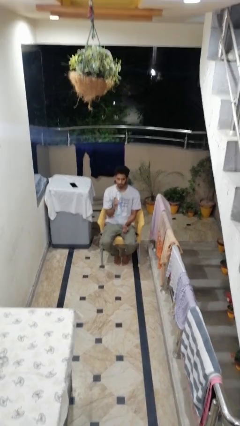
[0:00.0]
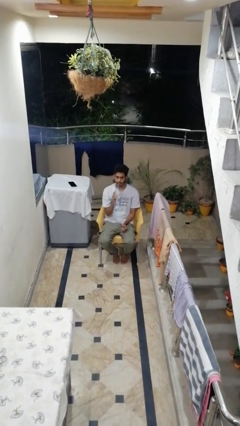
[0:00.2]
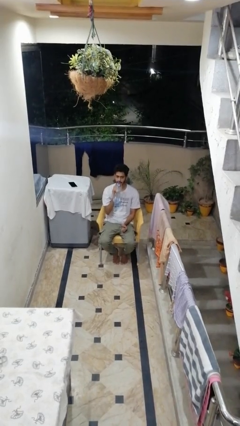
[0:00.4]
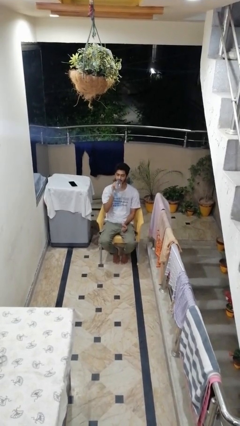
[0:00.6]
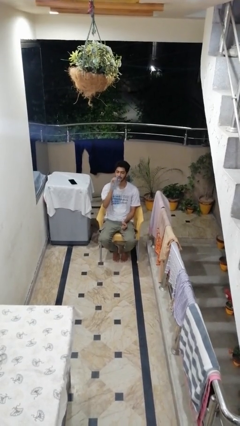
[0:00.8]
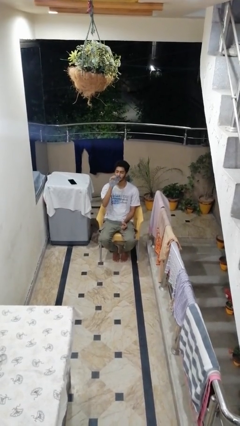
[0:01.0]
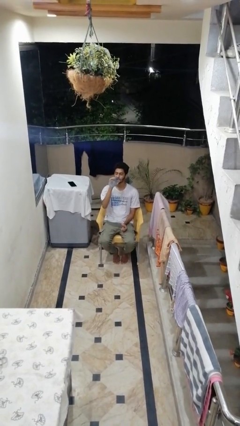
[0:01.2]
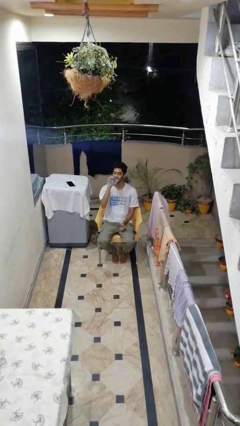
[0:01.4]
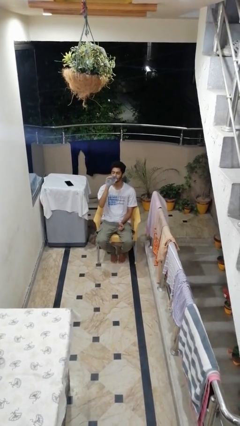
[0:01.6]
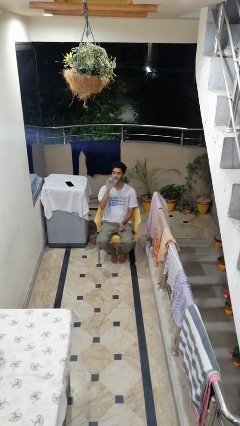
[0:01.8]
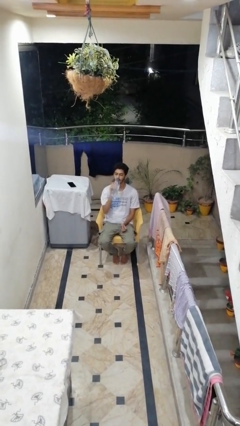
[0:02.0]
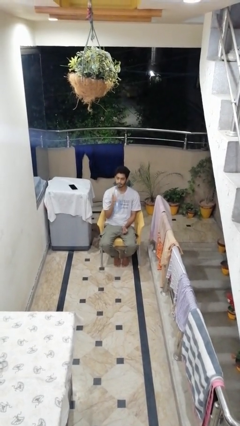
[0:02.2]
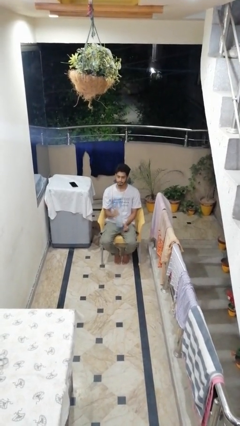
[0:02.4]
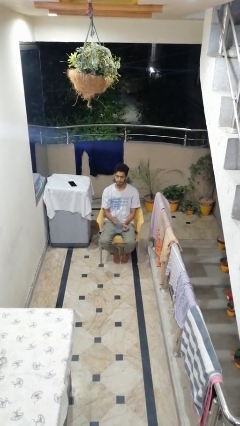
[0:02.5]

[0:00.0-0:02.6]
person drinks from bottle

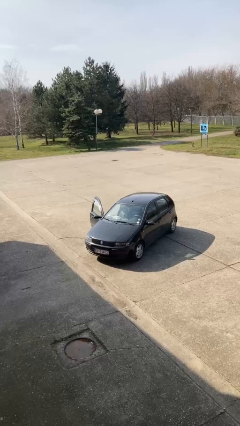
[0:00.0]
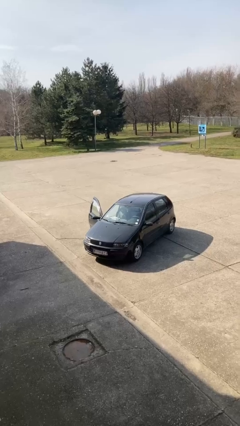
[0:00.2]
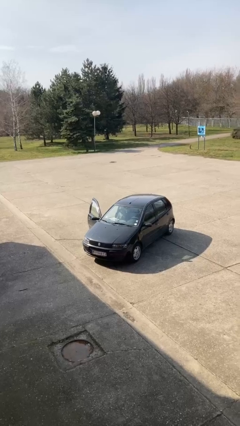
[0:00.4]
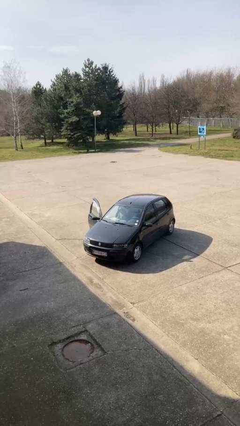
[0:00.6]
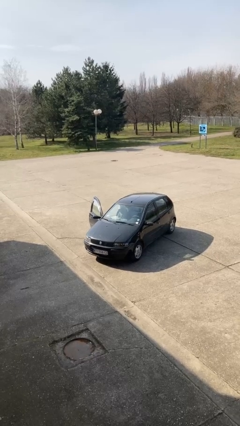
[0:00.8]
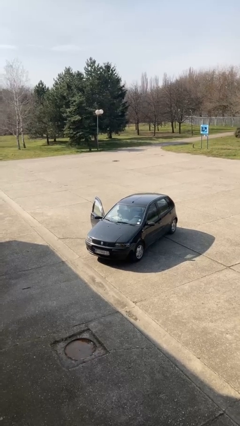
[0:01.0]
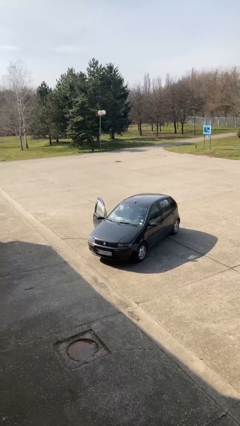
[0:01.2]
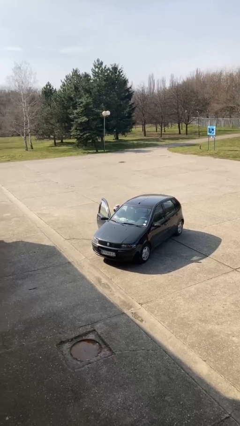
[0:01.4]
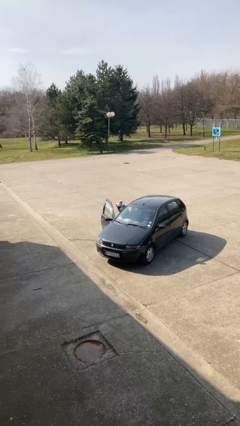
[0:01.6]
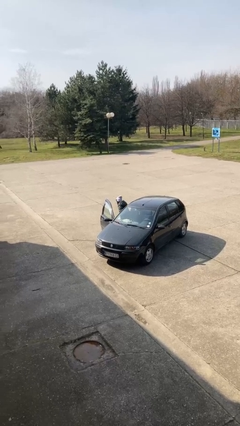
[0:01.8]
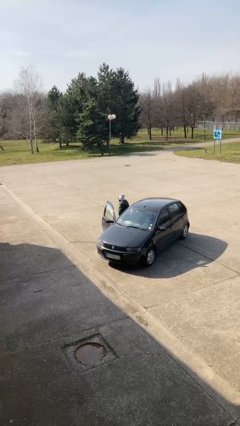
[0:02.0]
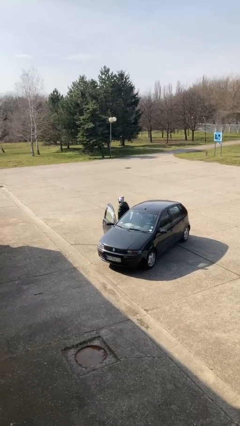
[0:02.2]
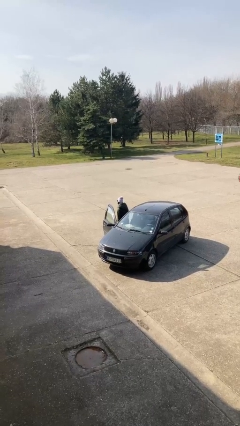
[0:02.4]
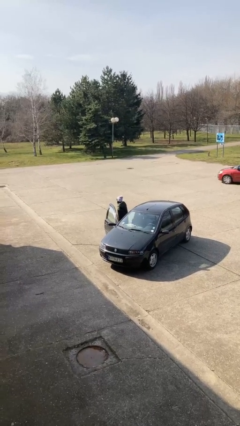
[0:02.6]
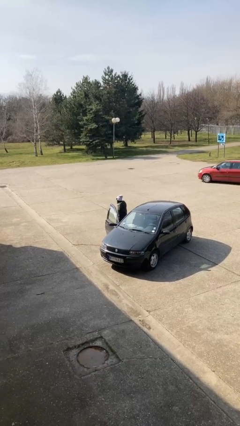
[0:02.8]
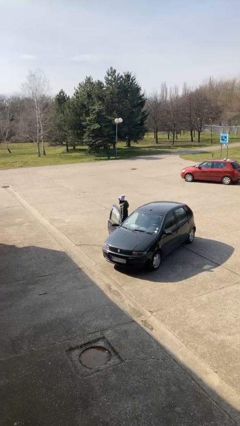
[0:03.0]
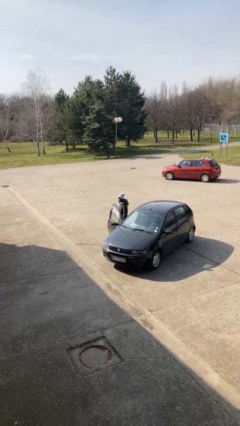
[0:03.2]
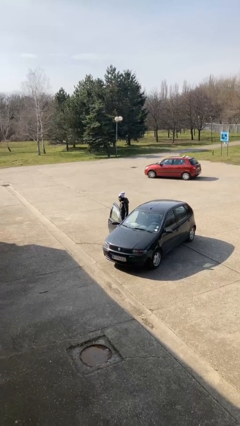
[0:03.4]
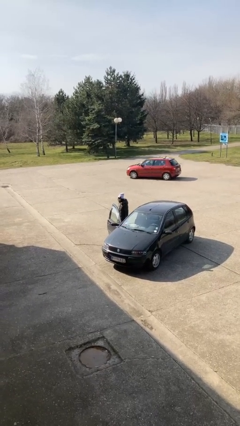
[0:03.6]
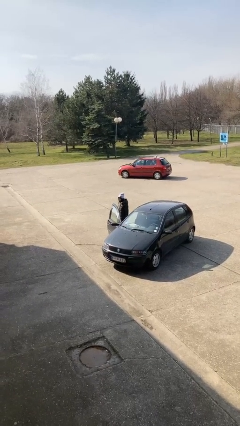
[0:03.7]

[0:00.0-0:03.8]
person exits car

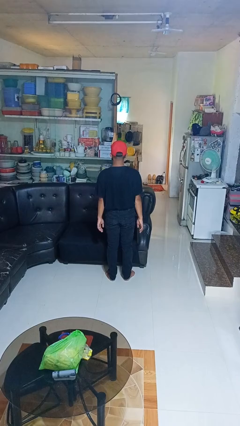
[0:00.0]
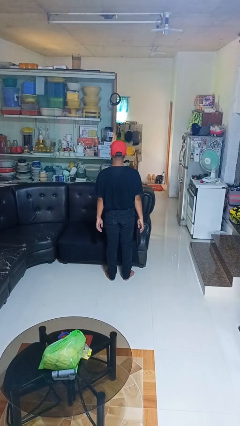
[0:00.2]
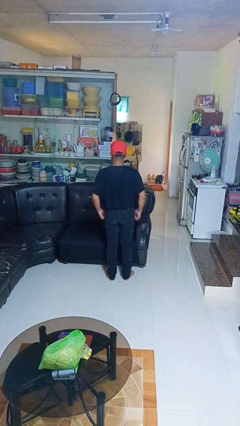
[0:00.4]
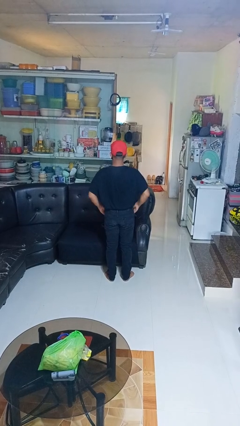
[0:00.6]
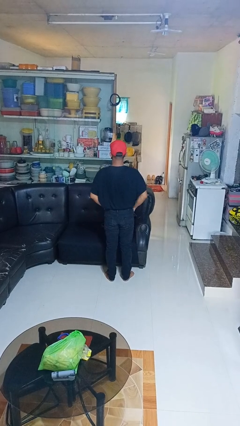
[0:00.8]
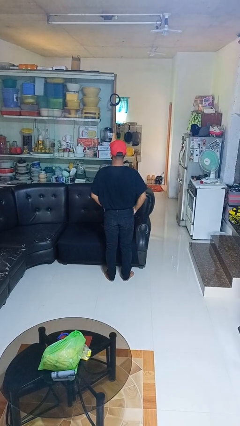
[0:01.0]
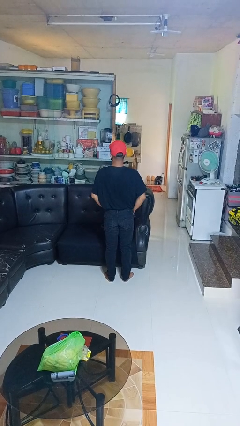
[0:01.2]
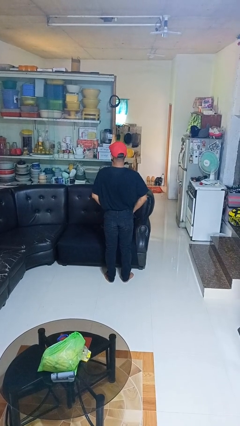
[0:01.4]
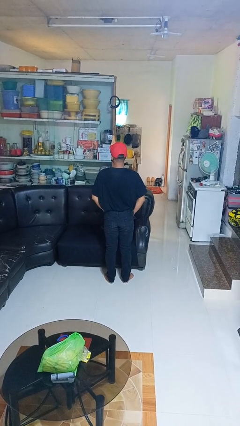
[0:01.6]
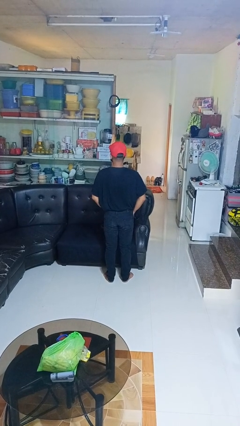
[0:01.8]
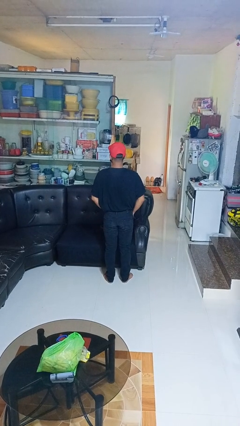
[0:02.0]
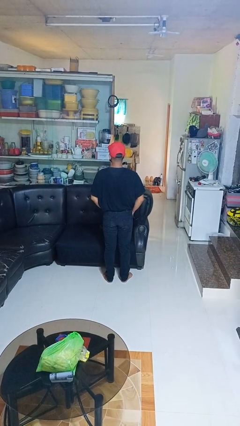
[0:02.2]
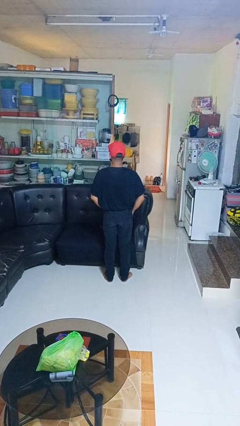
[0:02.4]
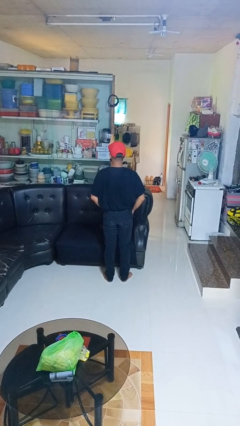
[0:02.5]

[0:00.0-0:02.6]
person puts hands in back pockets

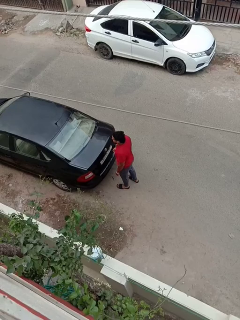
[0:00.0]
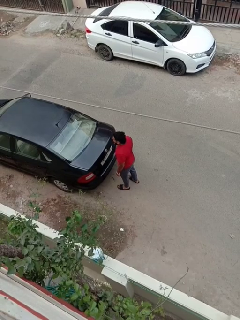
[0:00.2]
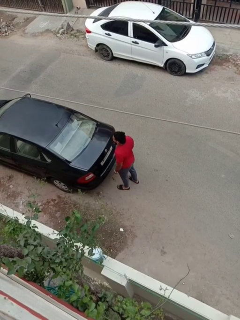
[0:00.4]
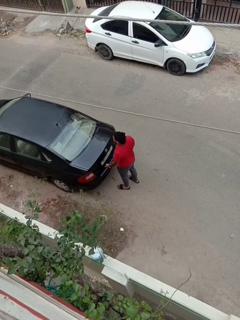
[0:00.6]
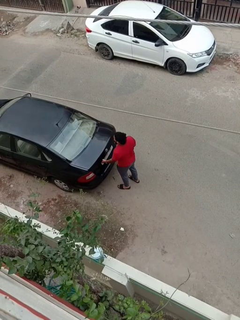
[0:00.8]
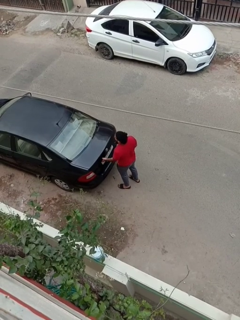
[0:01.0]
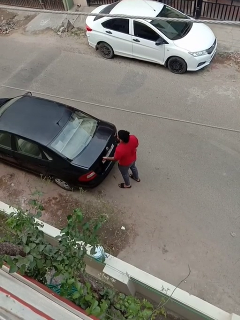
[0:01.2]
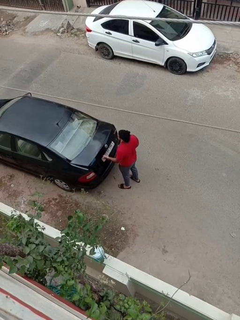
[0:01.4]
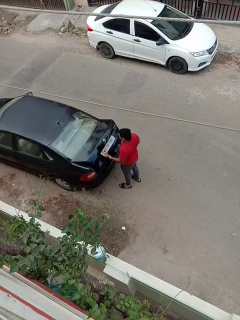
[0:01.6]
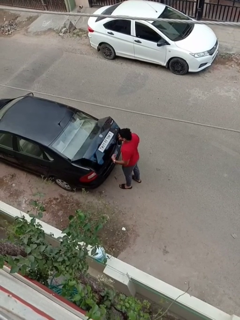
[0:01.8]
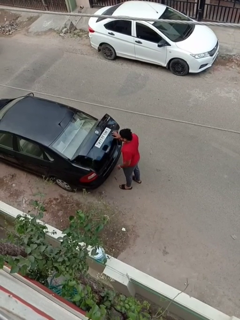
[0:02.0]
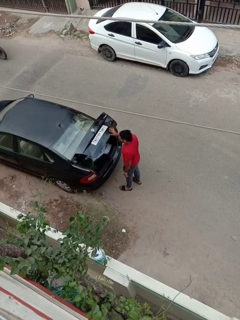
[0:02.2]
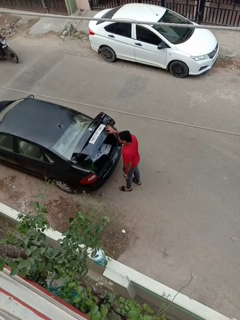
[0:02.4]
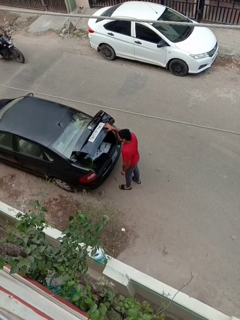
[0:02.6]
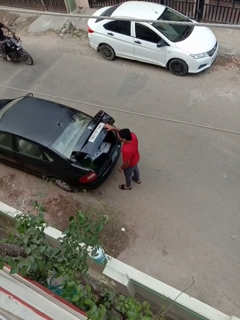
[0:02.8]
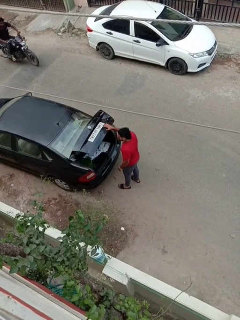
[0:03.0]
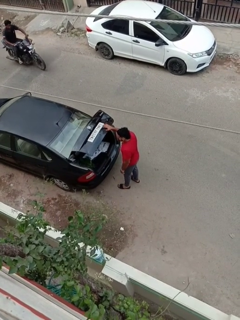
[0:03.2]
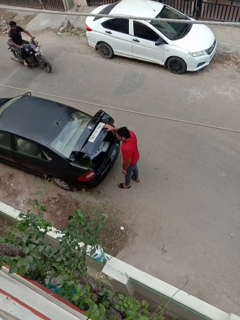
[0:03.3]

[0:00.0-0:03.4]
person opens car trunk

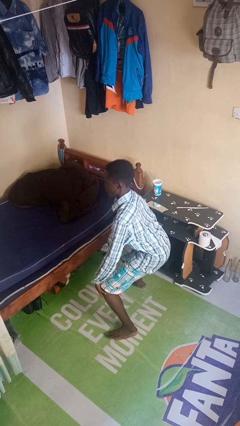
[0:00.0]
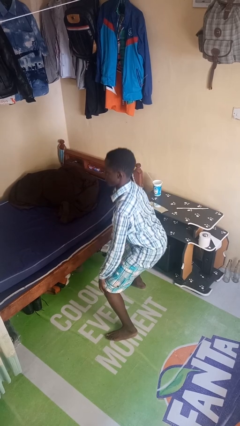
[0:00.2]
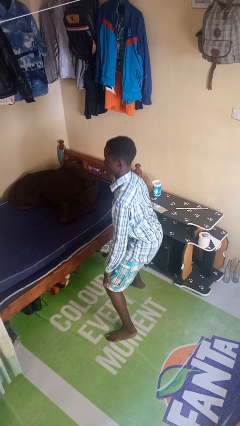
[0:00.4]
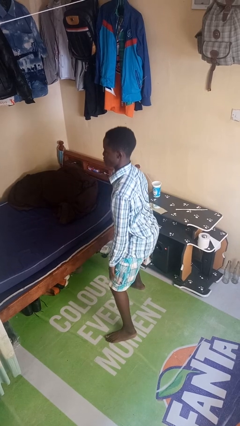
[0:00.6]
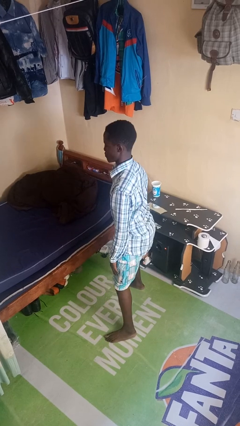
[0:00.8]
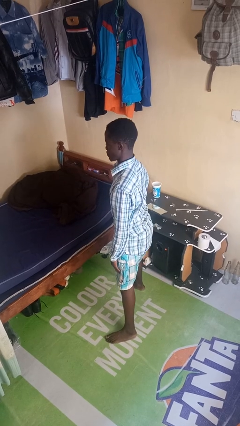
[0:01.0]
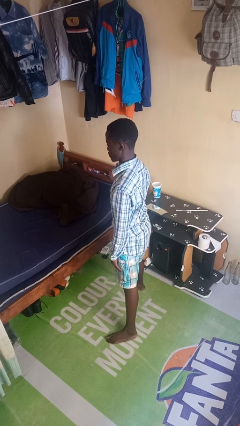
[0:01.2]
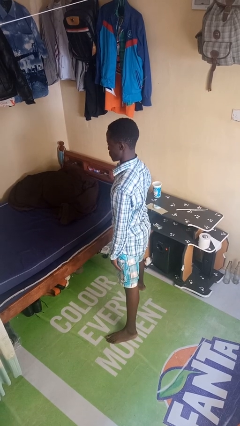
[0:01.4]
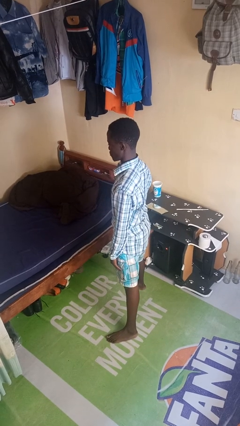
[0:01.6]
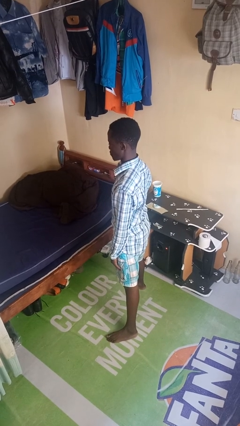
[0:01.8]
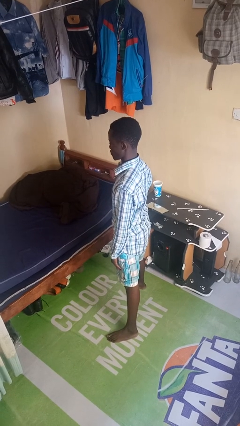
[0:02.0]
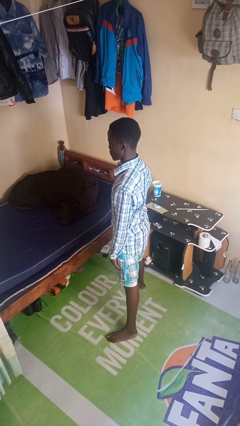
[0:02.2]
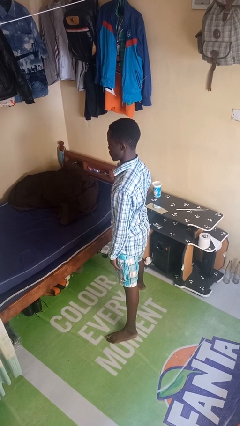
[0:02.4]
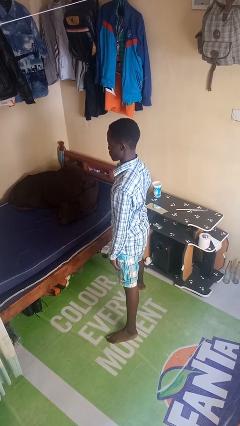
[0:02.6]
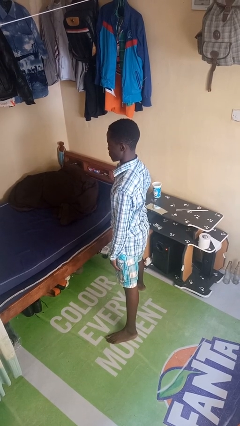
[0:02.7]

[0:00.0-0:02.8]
person stands up

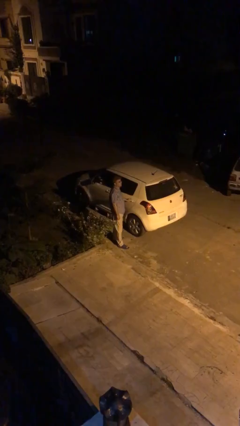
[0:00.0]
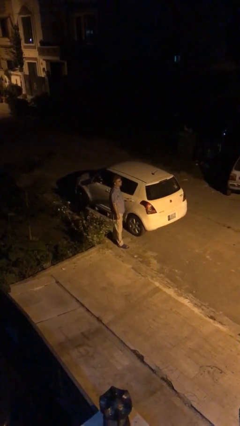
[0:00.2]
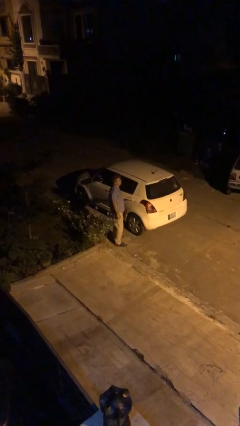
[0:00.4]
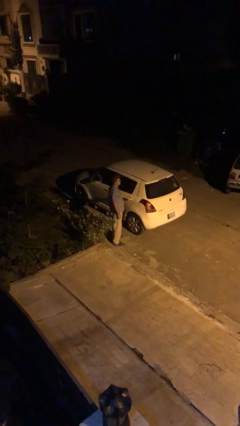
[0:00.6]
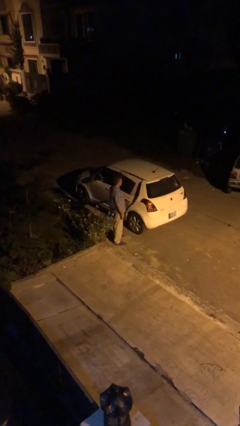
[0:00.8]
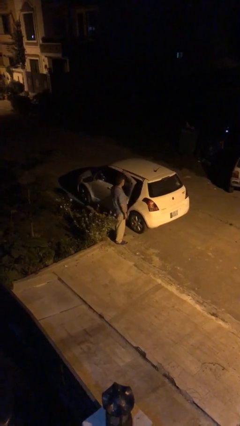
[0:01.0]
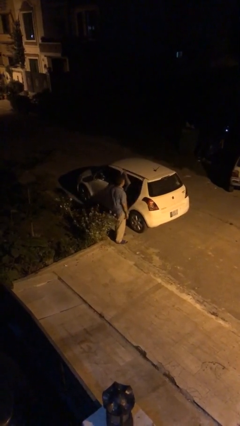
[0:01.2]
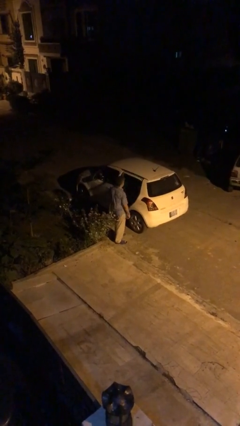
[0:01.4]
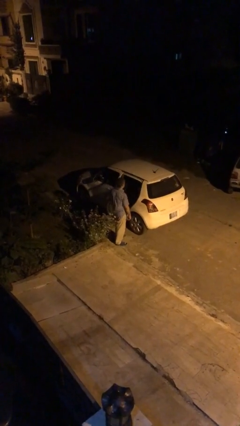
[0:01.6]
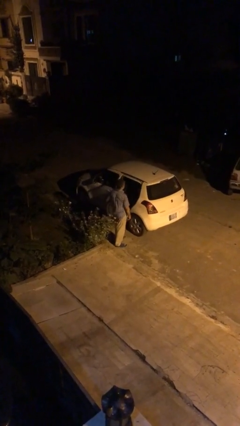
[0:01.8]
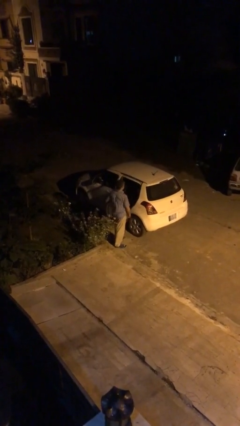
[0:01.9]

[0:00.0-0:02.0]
person opens car door

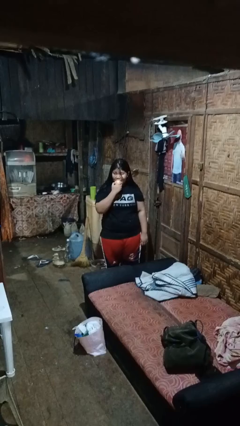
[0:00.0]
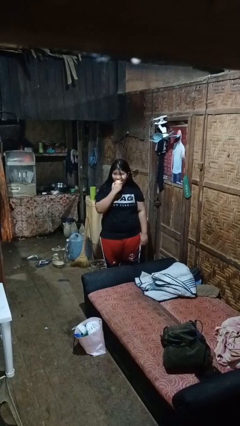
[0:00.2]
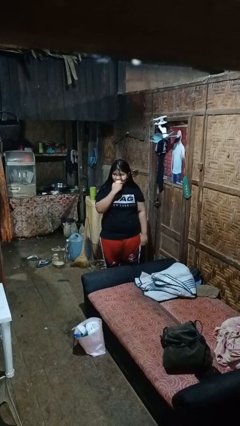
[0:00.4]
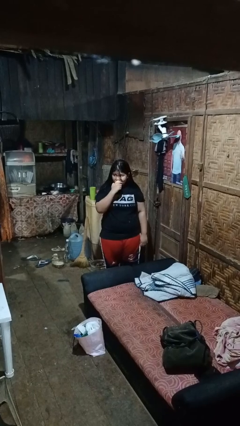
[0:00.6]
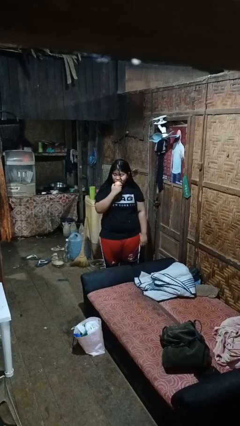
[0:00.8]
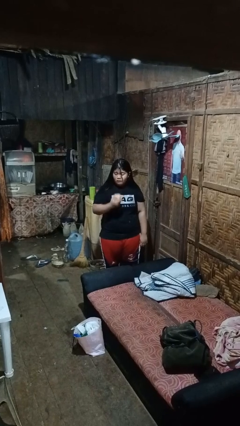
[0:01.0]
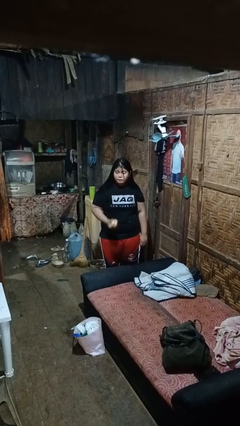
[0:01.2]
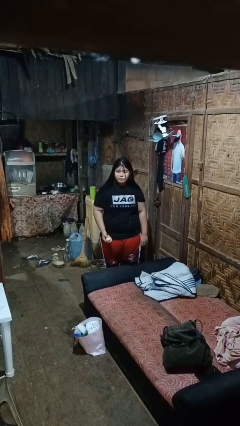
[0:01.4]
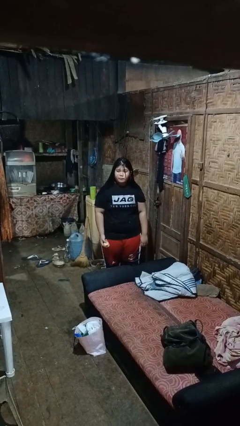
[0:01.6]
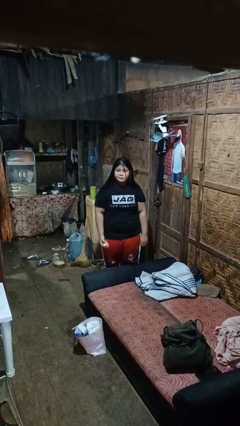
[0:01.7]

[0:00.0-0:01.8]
person eats apple
